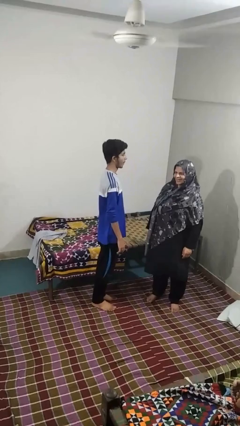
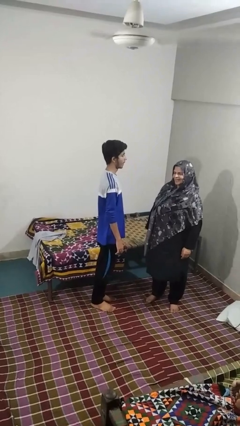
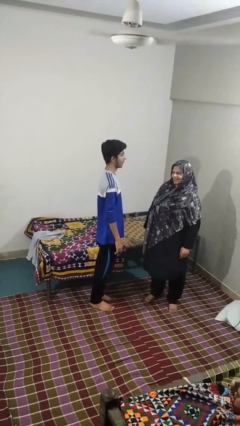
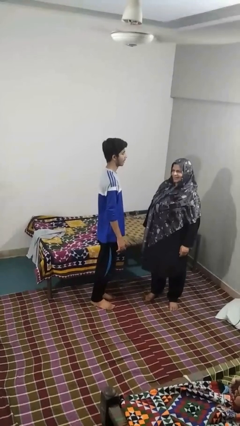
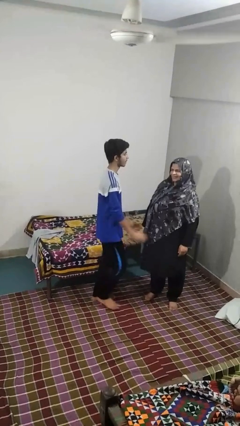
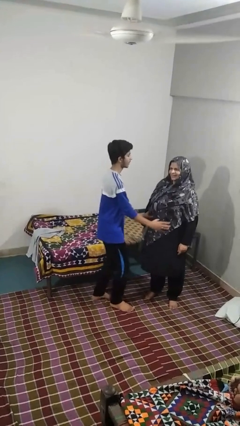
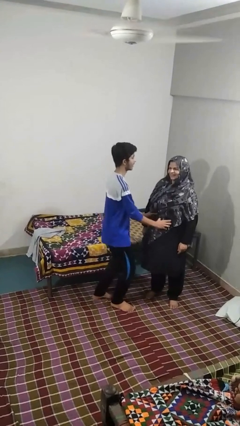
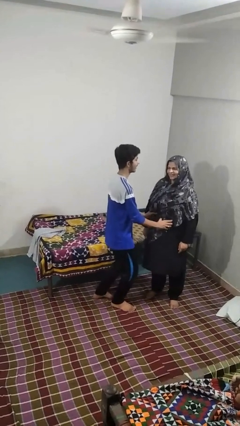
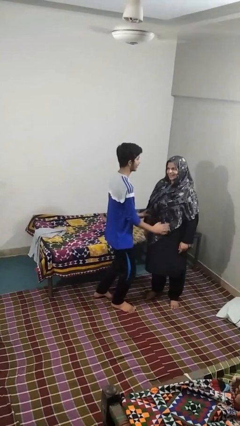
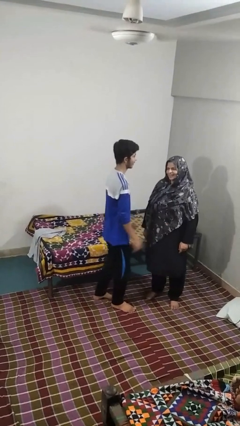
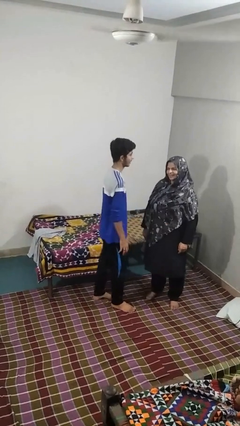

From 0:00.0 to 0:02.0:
person tickles person

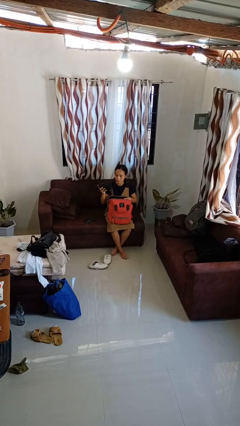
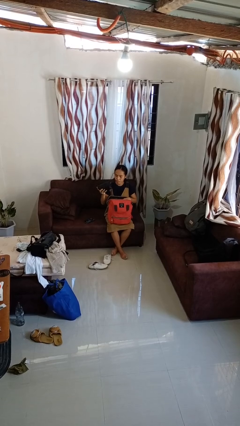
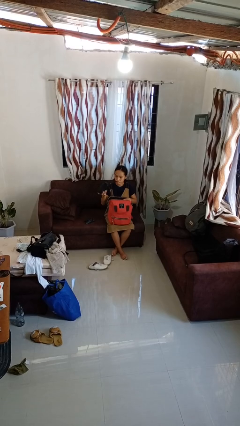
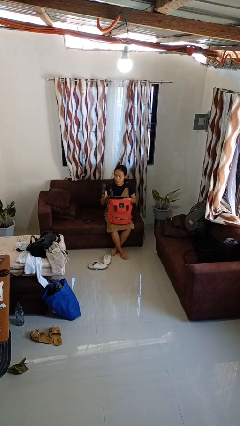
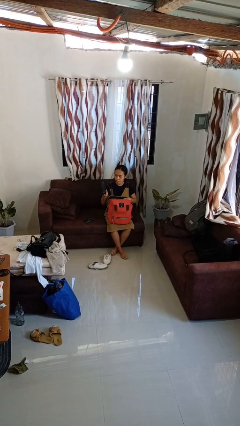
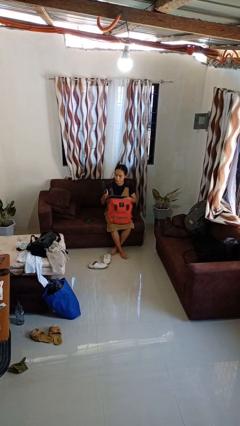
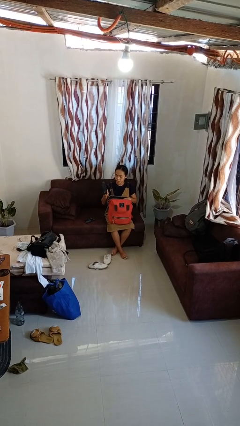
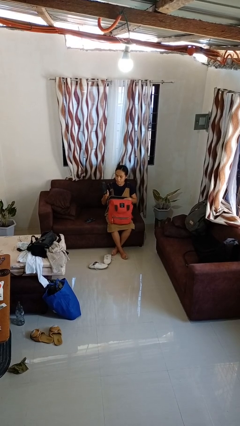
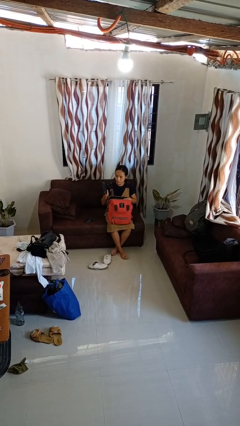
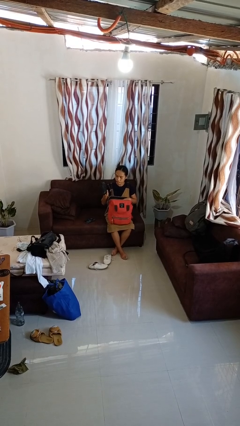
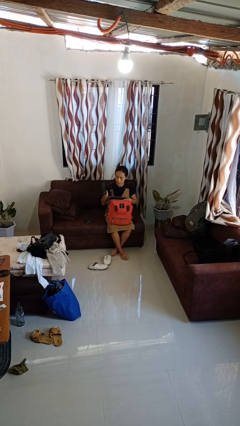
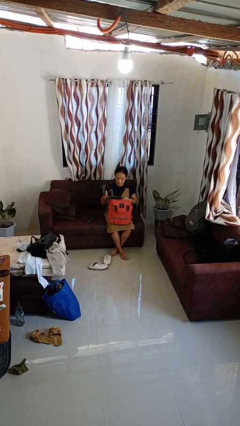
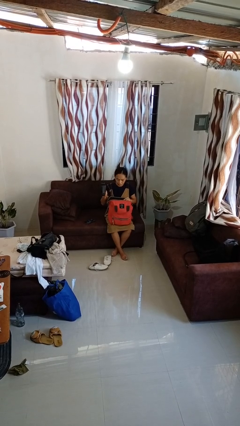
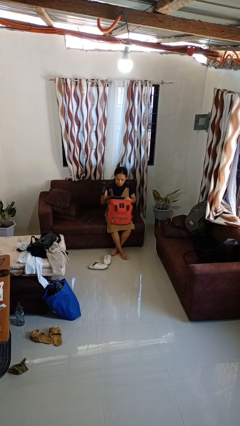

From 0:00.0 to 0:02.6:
person takes object from backpack

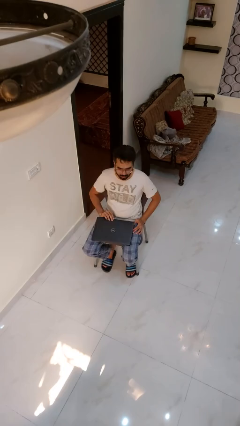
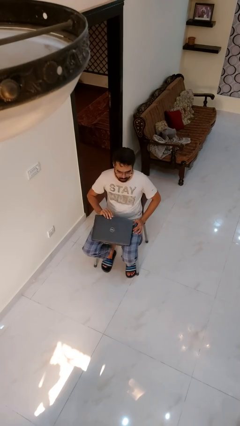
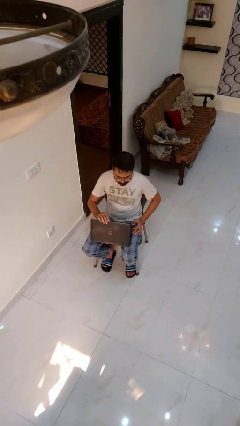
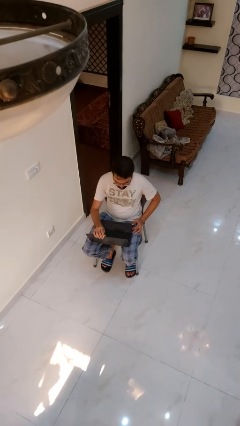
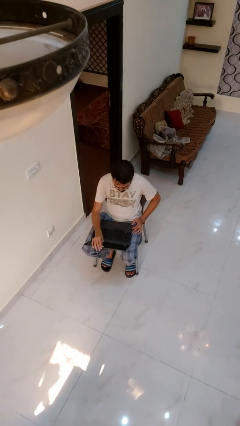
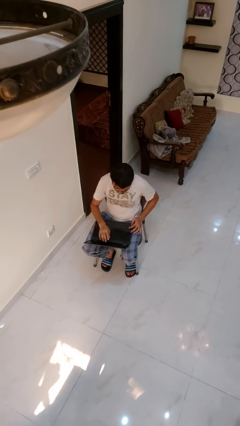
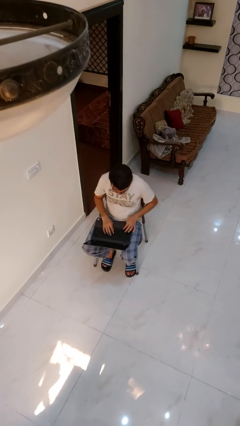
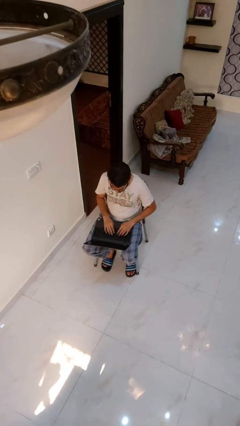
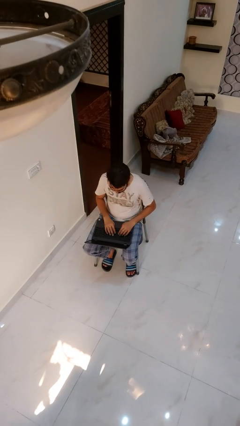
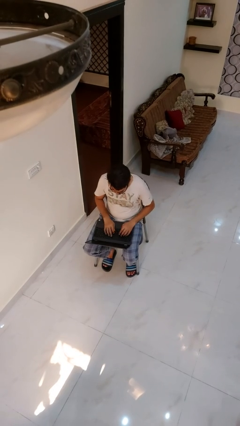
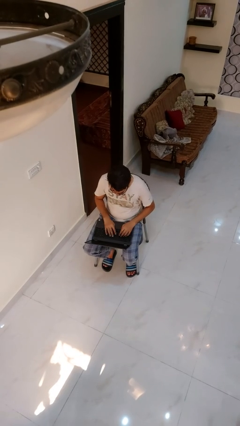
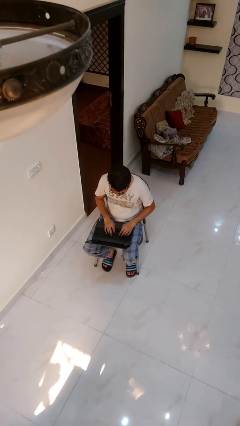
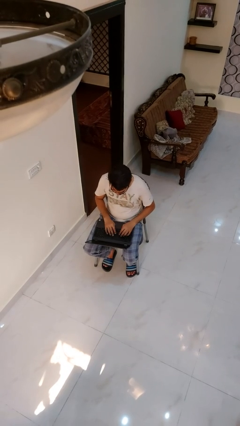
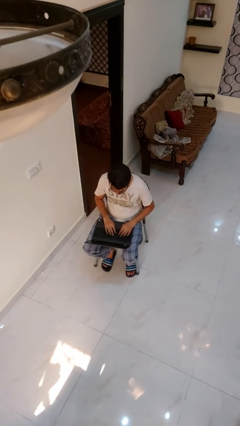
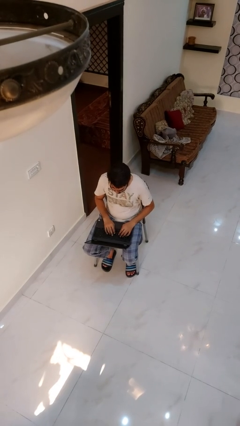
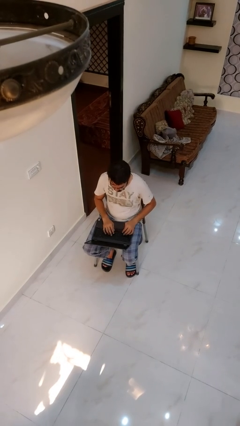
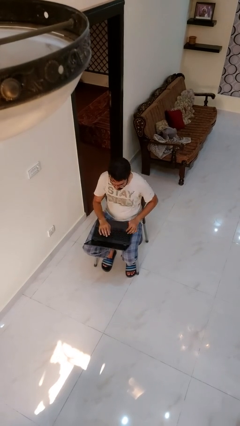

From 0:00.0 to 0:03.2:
person opens laptop

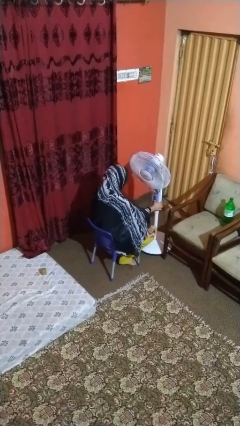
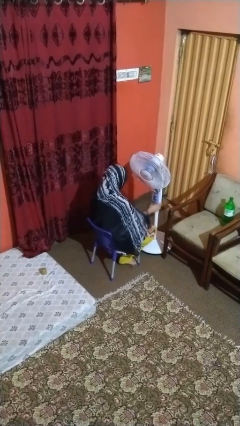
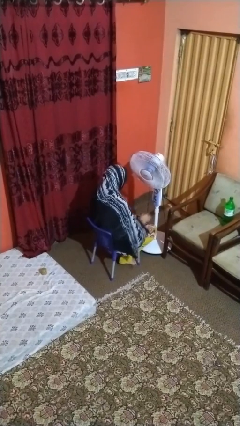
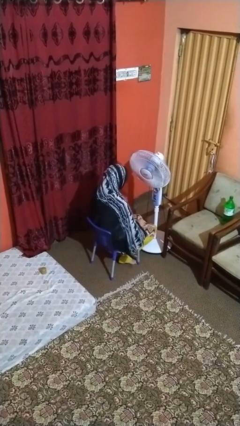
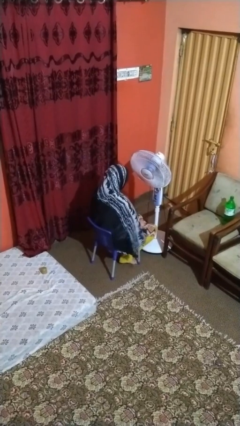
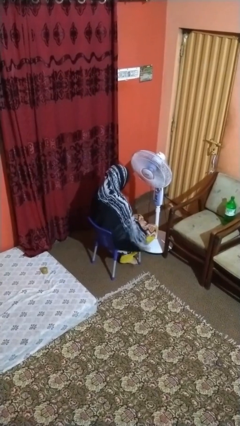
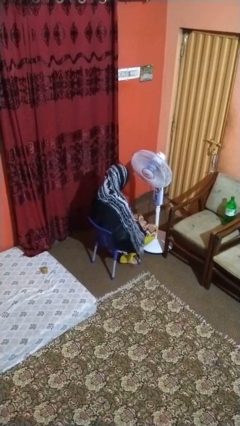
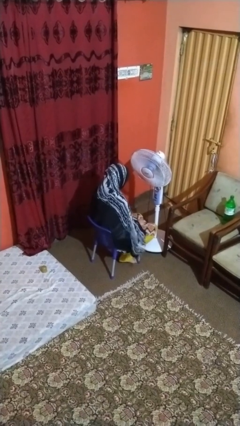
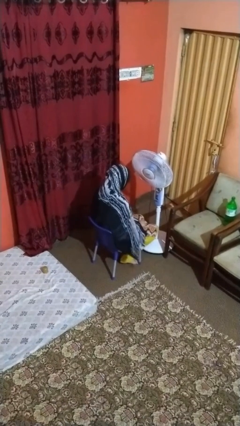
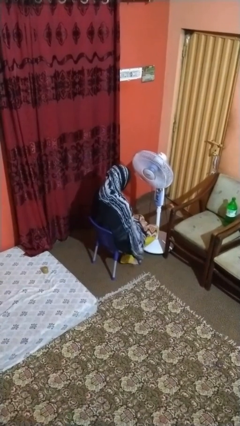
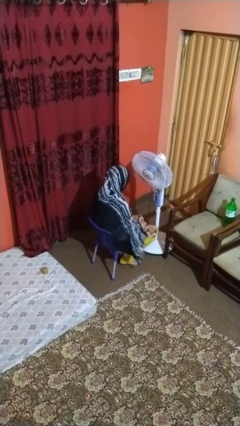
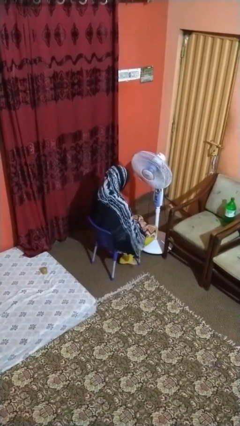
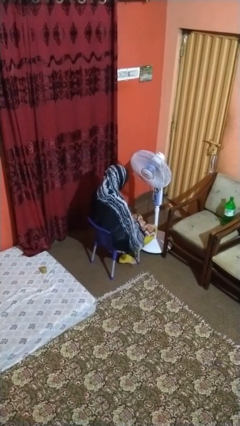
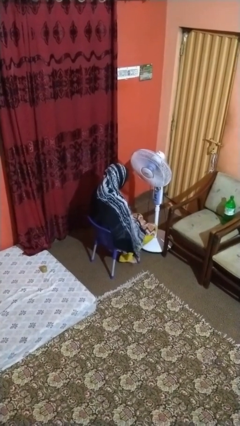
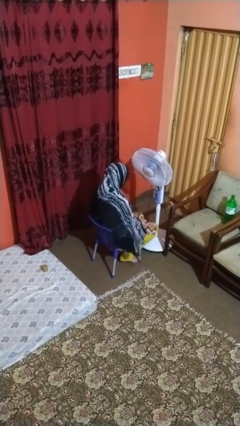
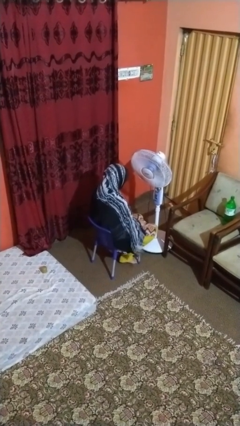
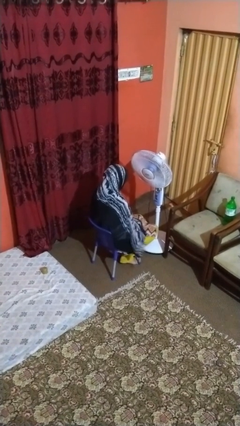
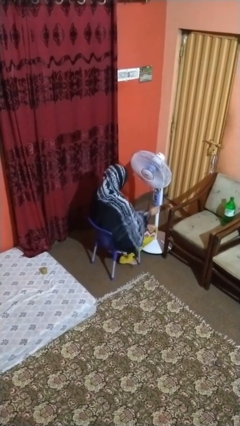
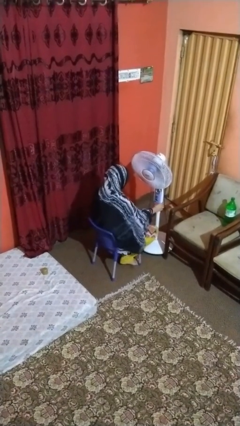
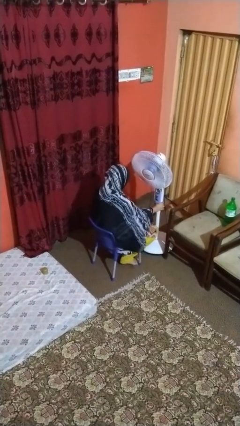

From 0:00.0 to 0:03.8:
person turns on fan

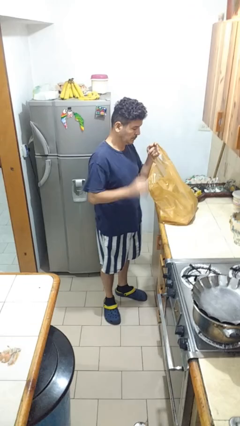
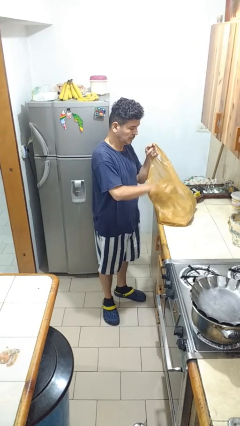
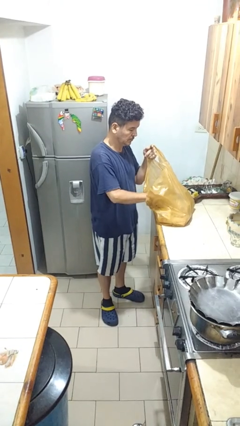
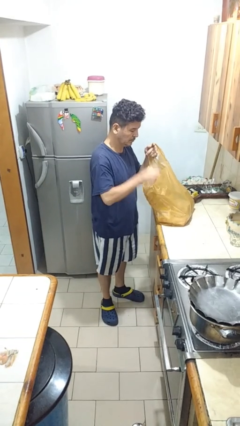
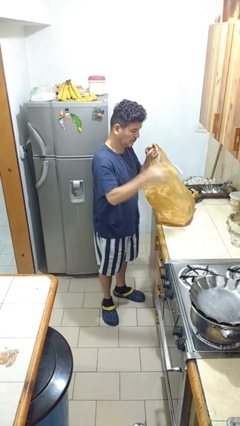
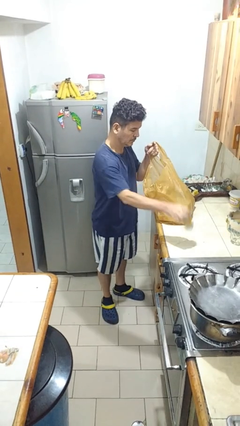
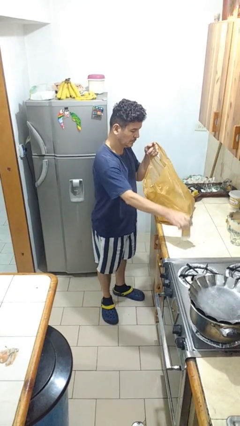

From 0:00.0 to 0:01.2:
person takes object from bag

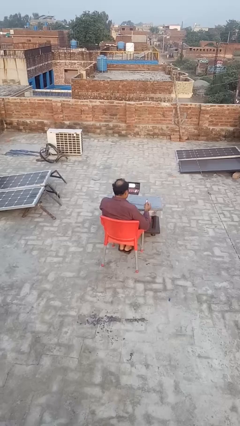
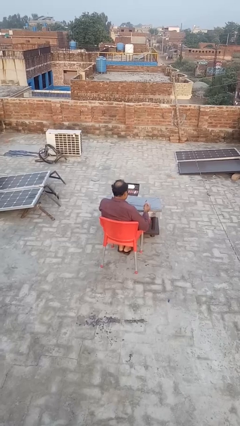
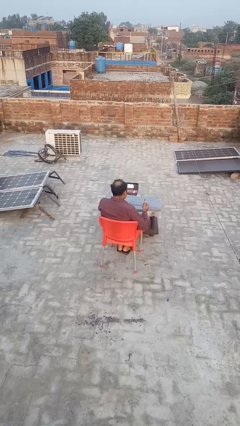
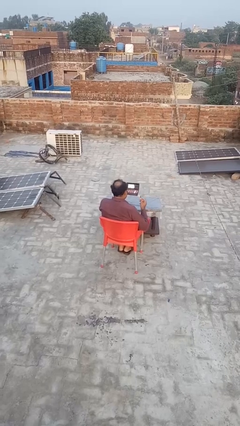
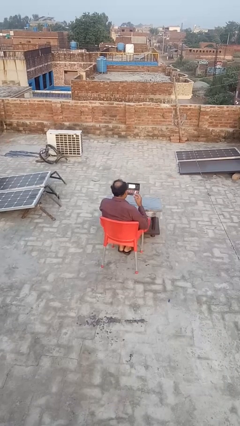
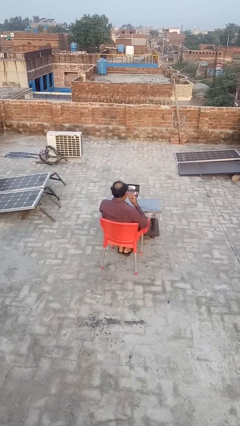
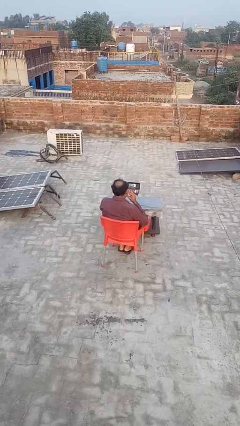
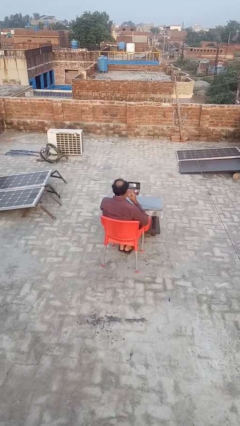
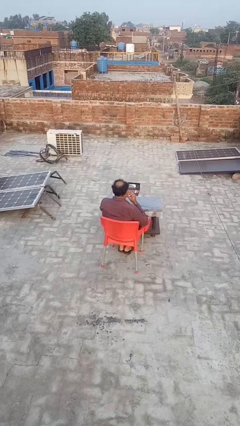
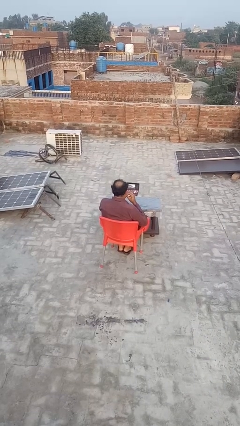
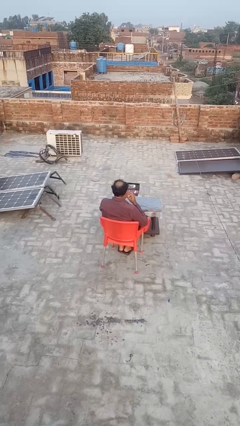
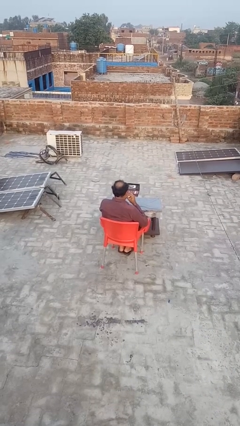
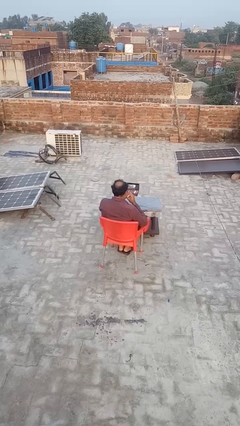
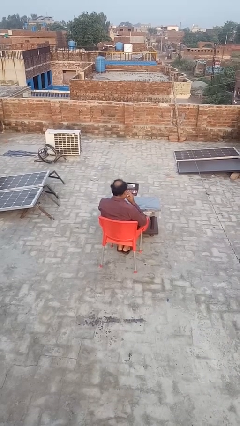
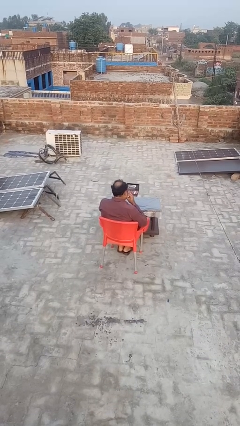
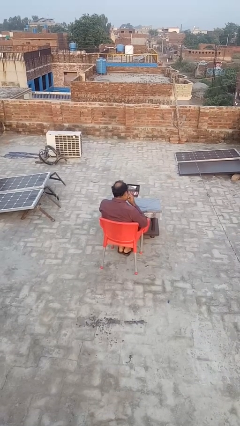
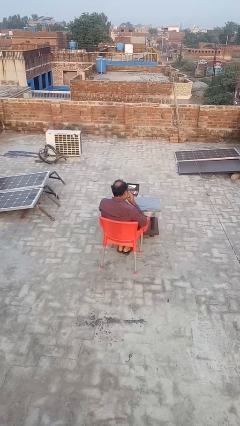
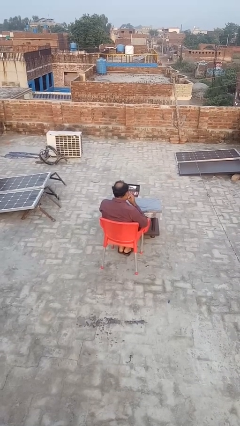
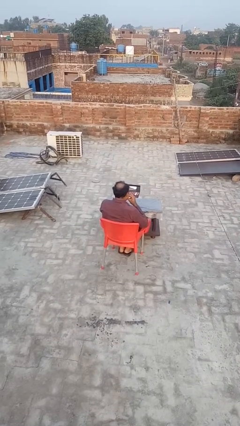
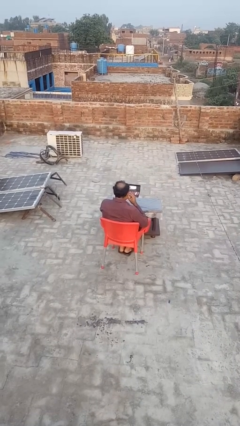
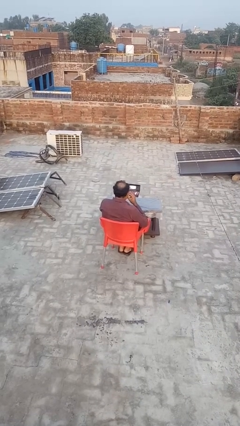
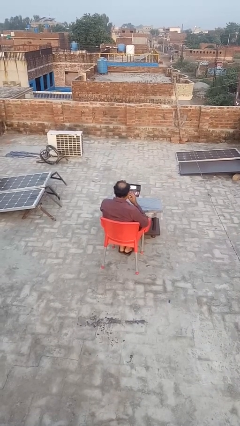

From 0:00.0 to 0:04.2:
person applies lip makeup

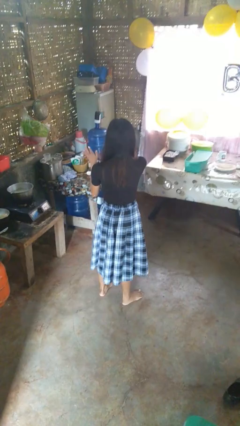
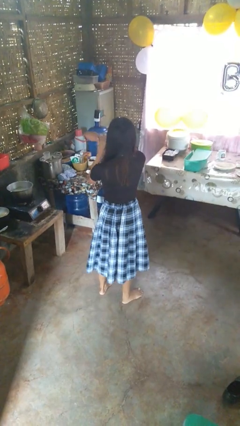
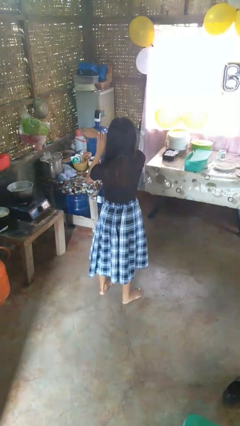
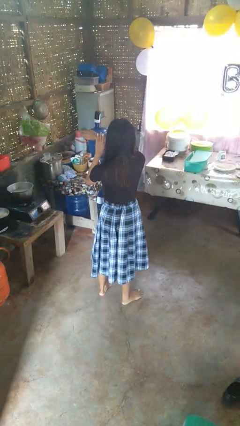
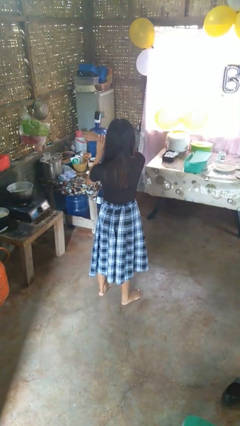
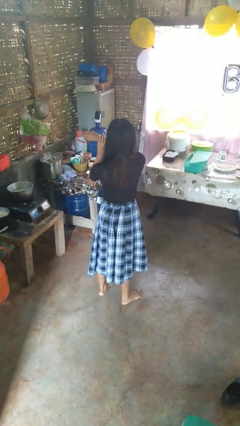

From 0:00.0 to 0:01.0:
person swats bug
